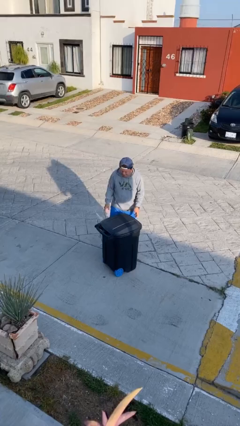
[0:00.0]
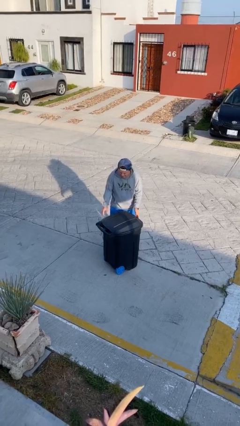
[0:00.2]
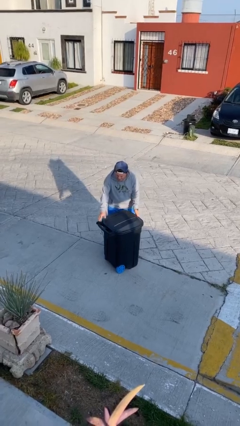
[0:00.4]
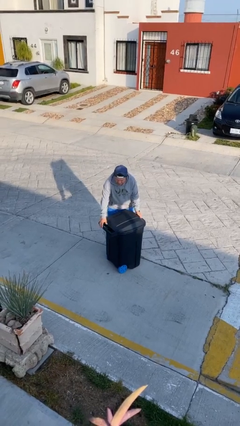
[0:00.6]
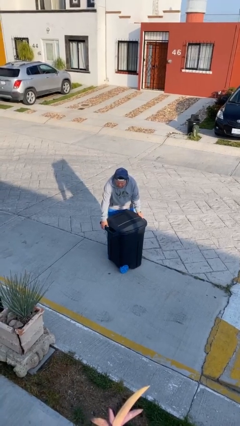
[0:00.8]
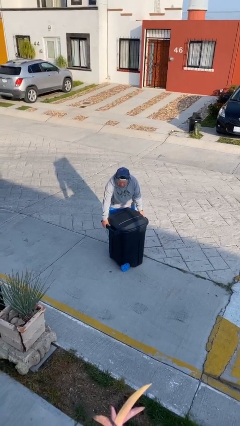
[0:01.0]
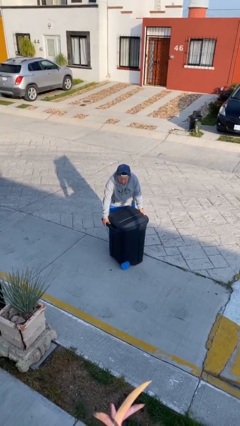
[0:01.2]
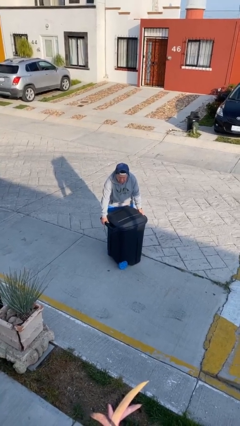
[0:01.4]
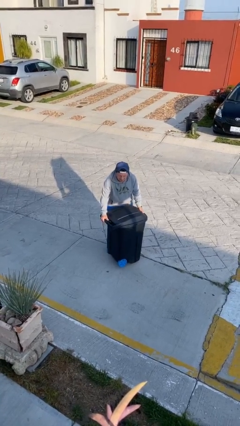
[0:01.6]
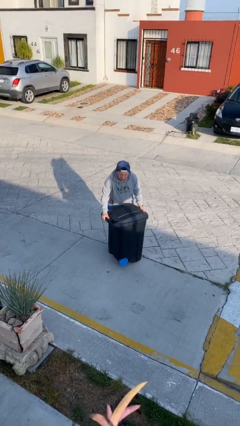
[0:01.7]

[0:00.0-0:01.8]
person picks up object from floor

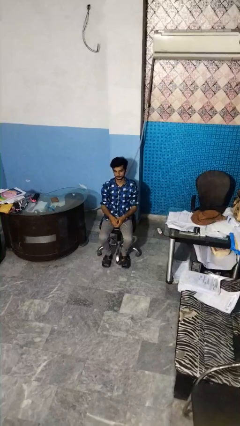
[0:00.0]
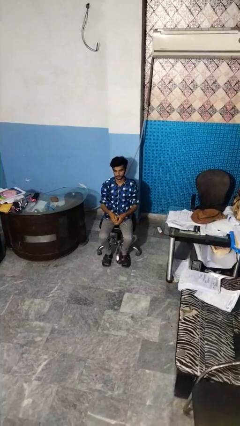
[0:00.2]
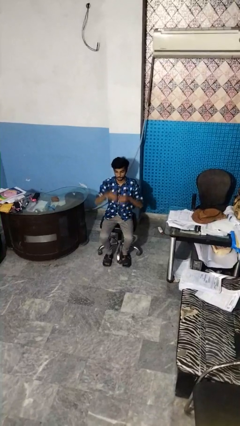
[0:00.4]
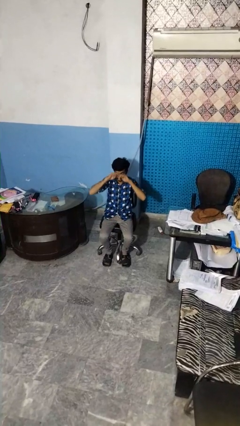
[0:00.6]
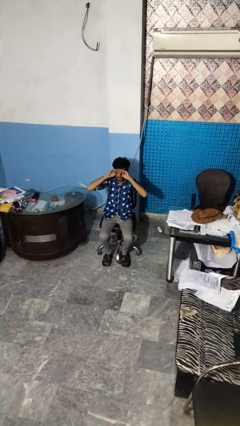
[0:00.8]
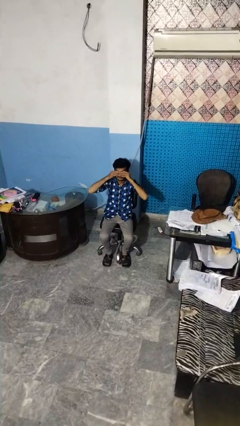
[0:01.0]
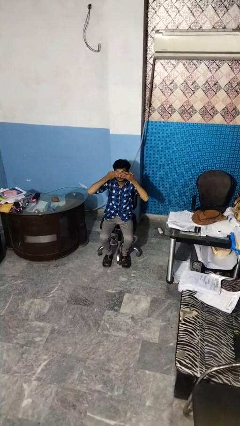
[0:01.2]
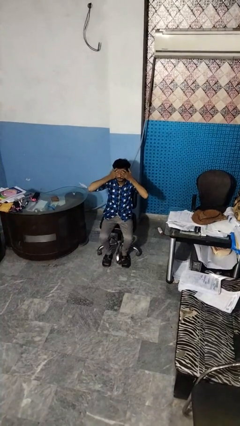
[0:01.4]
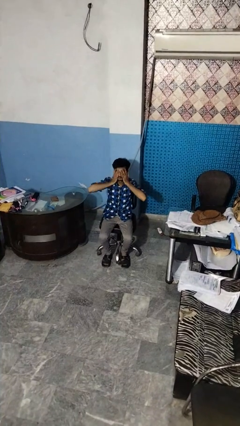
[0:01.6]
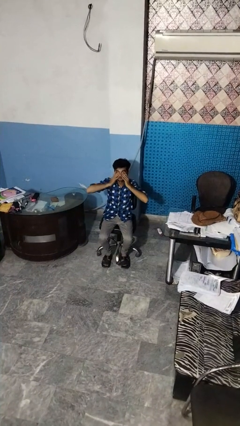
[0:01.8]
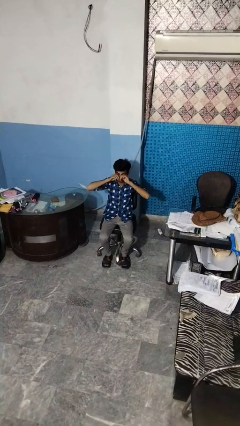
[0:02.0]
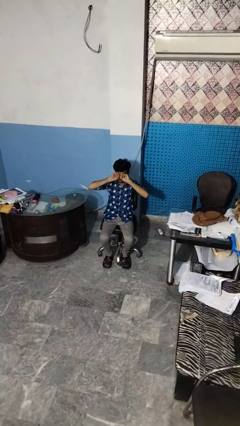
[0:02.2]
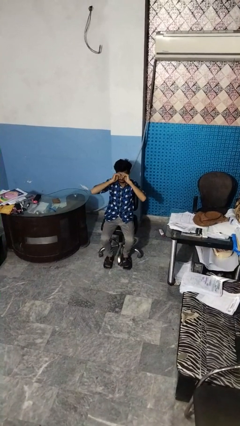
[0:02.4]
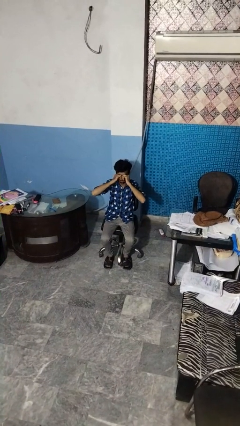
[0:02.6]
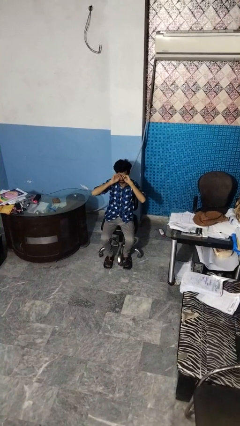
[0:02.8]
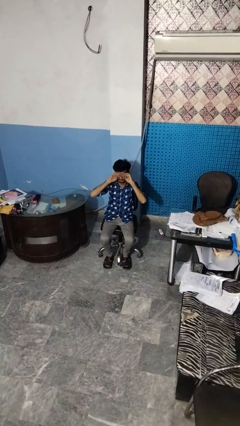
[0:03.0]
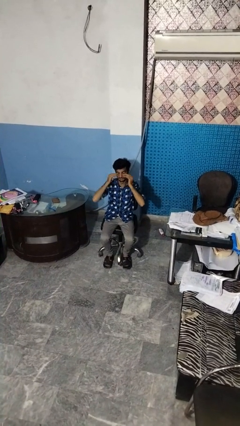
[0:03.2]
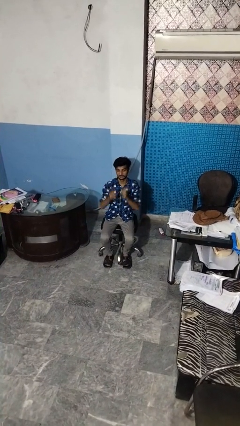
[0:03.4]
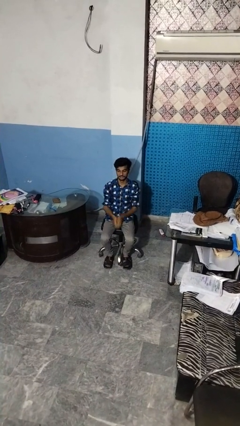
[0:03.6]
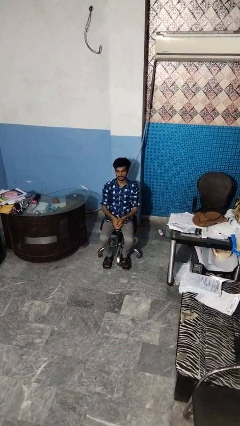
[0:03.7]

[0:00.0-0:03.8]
person rubs eyes

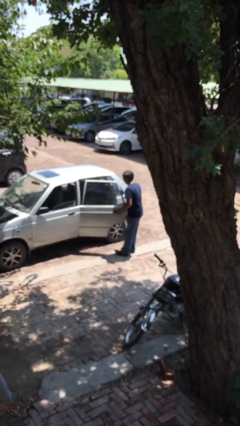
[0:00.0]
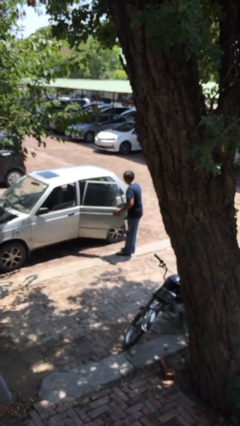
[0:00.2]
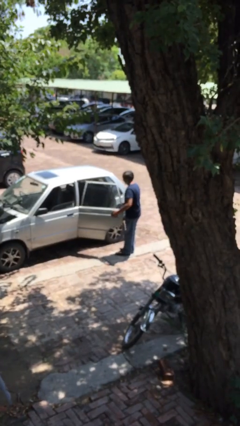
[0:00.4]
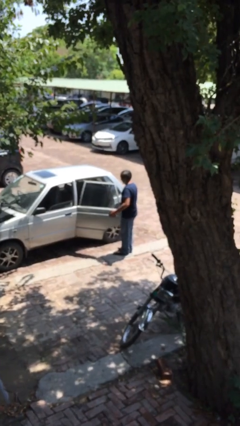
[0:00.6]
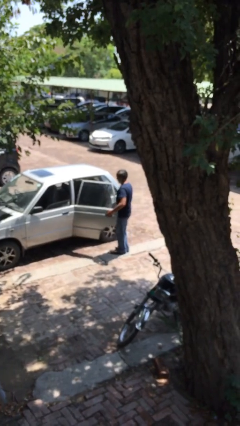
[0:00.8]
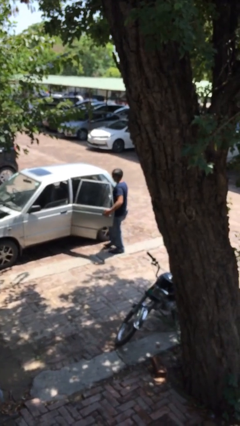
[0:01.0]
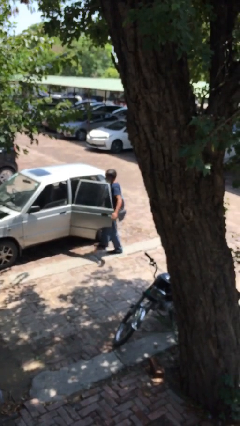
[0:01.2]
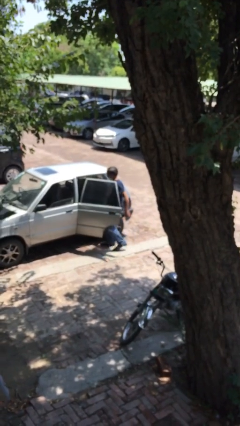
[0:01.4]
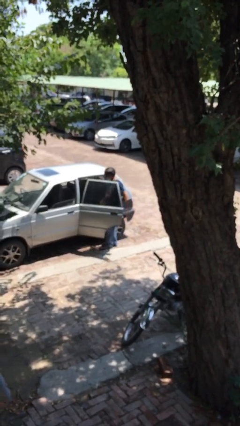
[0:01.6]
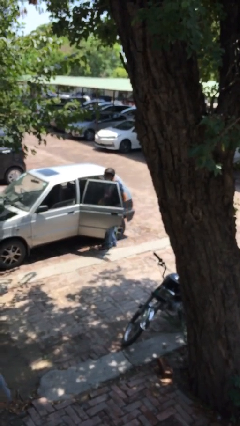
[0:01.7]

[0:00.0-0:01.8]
person enters car

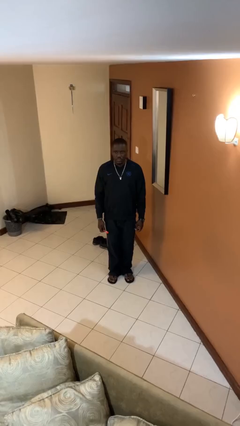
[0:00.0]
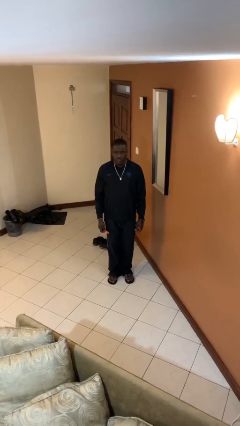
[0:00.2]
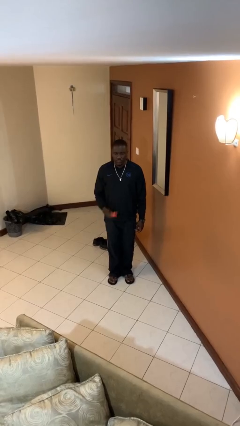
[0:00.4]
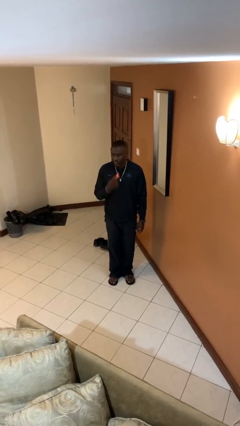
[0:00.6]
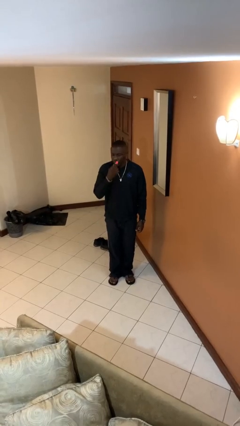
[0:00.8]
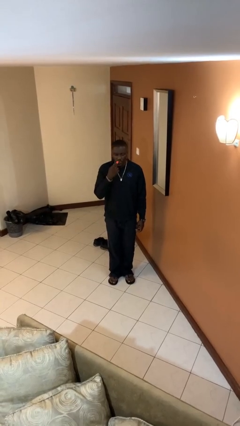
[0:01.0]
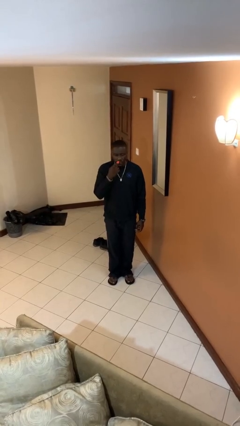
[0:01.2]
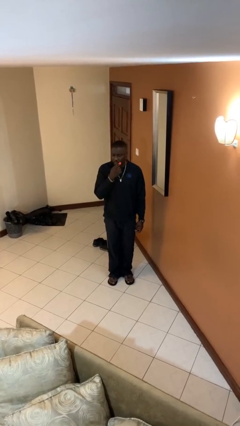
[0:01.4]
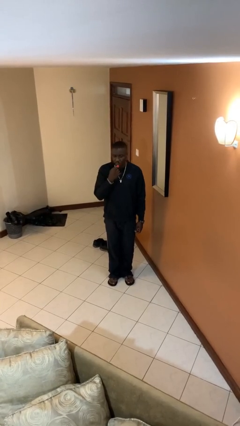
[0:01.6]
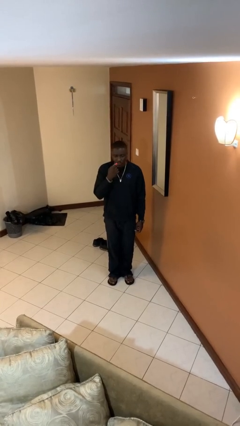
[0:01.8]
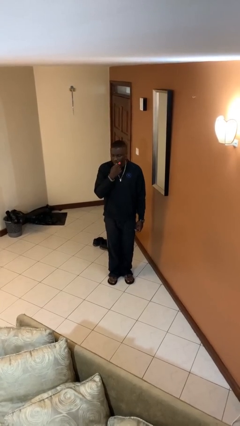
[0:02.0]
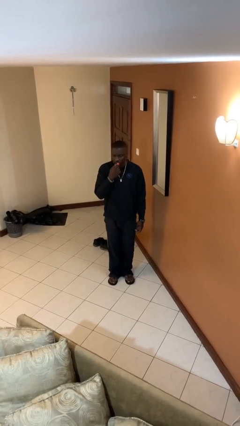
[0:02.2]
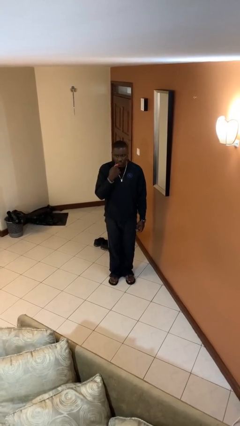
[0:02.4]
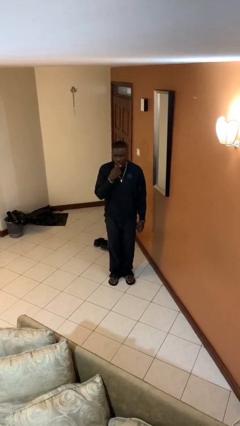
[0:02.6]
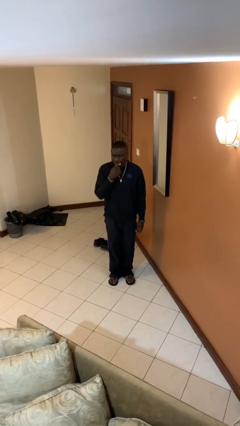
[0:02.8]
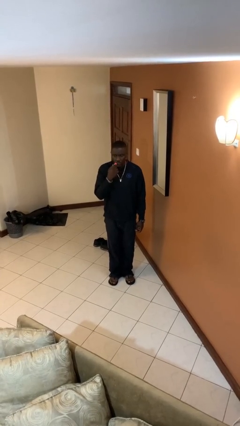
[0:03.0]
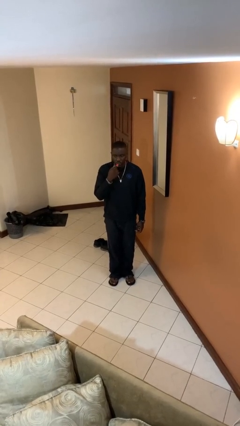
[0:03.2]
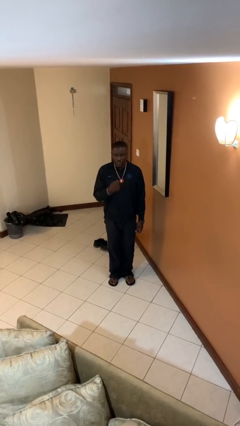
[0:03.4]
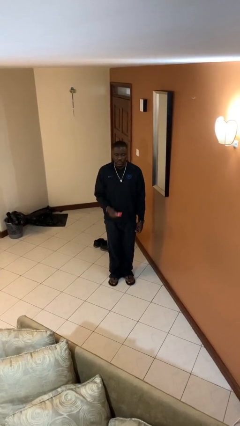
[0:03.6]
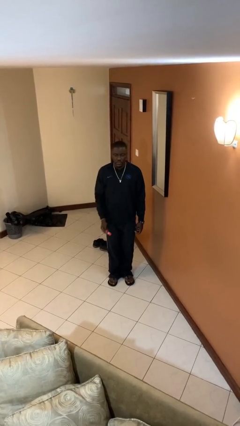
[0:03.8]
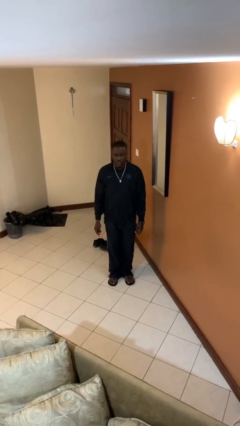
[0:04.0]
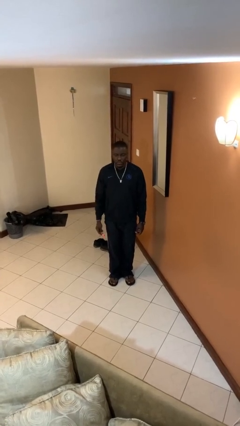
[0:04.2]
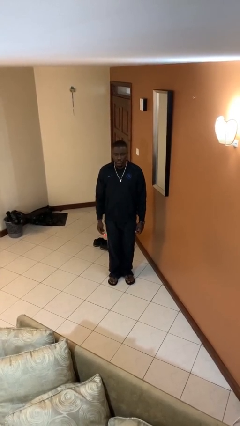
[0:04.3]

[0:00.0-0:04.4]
person applies lip makeup

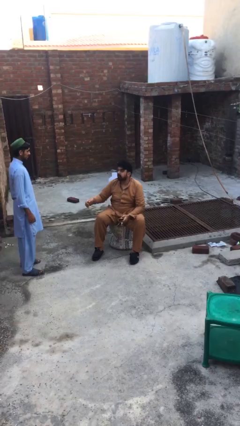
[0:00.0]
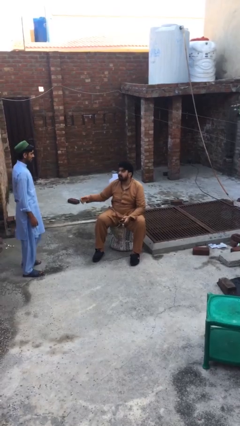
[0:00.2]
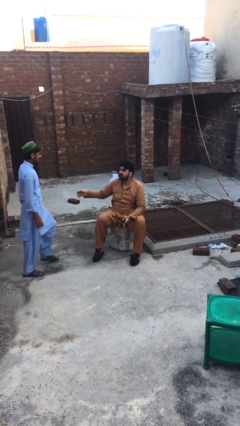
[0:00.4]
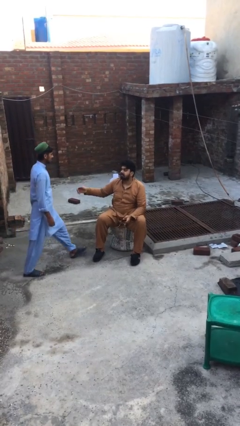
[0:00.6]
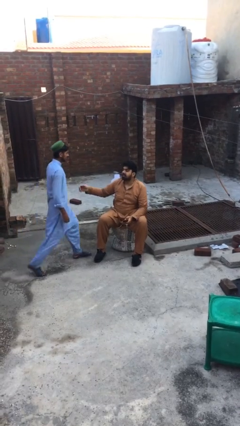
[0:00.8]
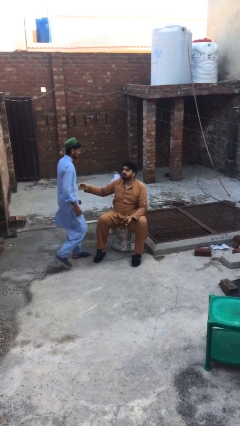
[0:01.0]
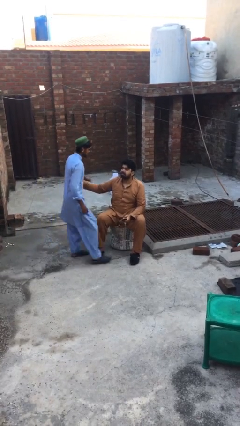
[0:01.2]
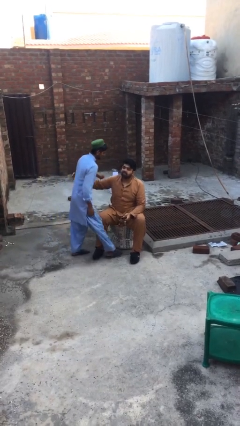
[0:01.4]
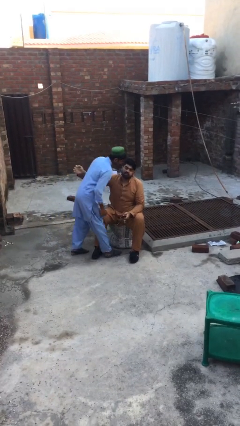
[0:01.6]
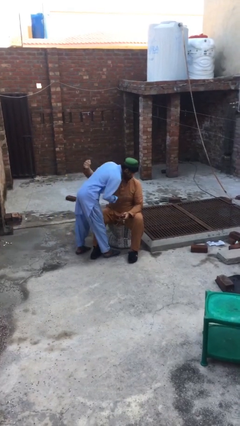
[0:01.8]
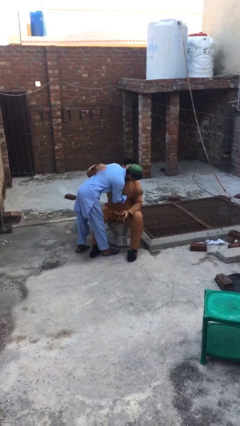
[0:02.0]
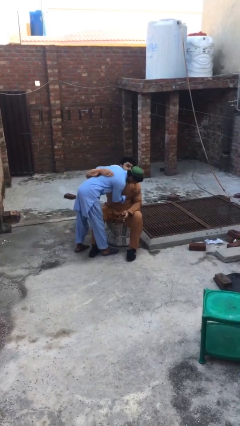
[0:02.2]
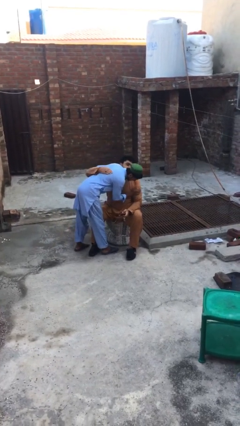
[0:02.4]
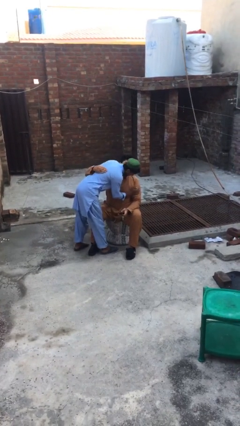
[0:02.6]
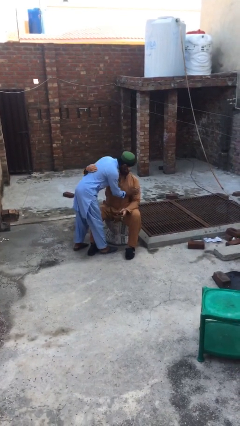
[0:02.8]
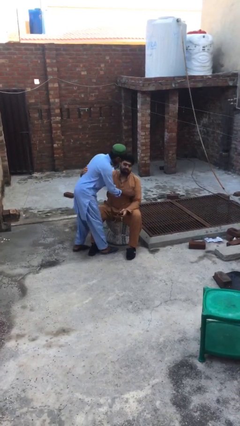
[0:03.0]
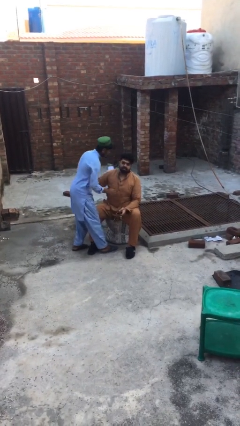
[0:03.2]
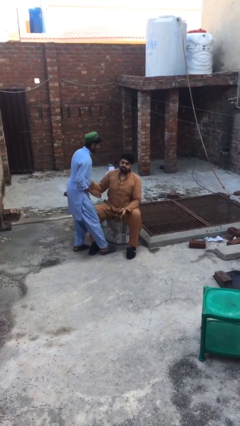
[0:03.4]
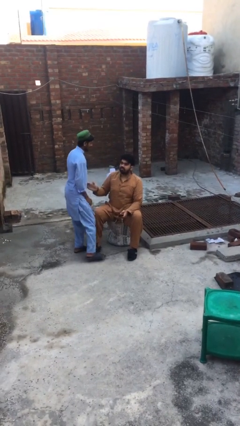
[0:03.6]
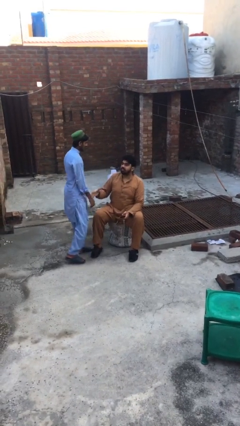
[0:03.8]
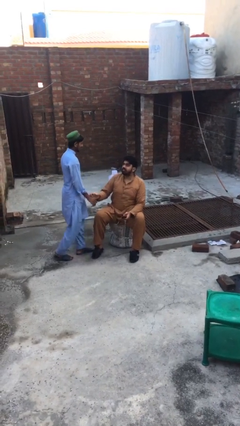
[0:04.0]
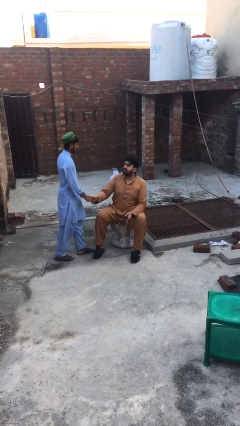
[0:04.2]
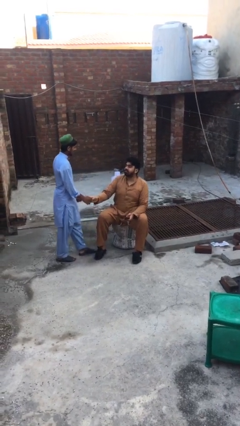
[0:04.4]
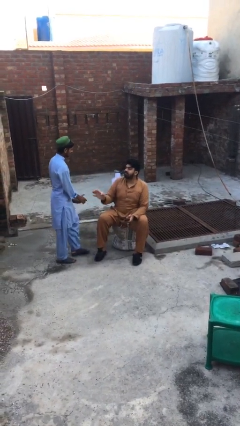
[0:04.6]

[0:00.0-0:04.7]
person embraces person

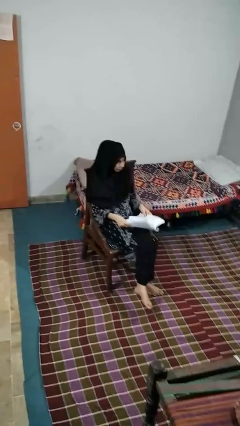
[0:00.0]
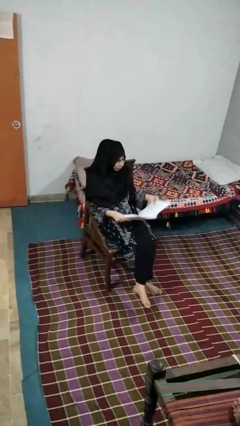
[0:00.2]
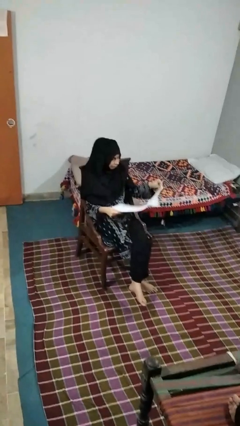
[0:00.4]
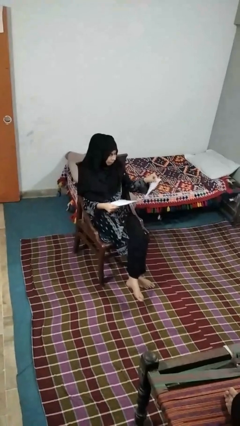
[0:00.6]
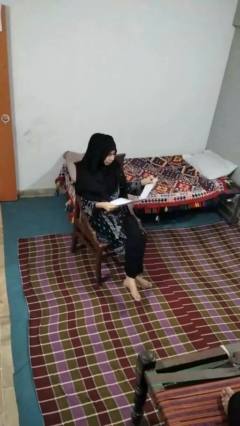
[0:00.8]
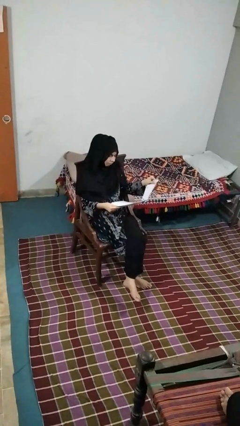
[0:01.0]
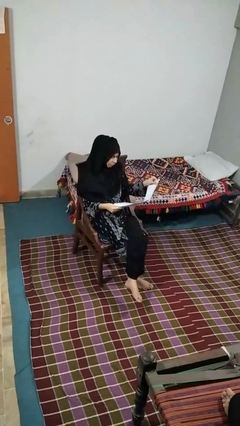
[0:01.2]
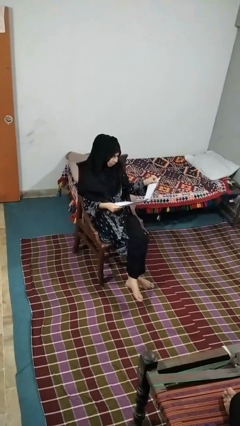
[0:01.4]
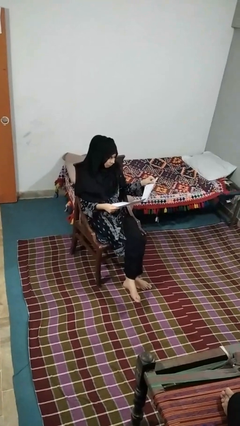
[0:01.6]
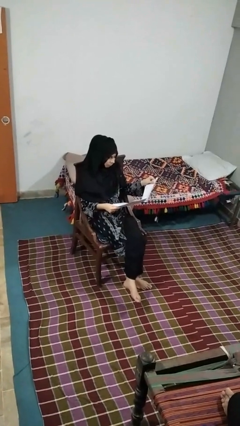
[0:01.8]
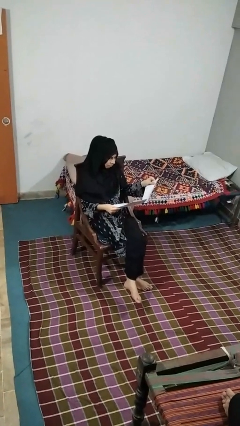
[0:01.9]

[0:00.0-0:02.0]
person reads newspaper
